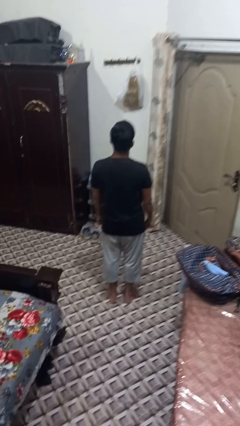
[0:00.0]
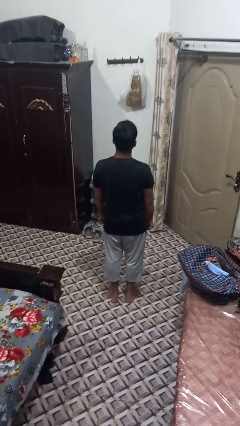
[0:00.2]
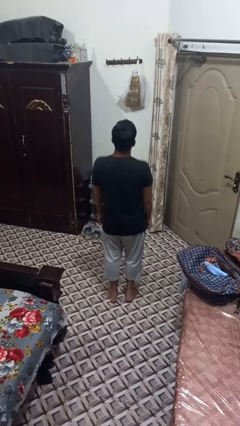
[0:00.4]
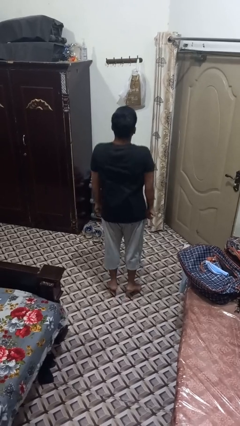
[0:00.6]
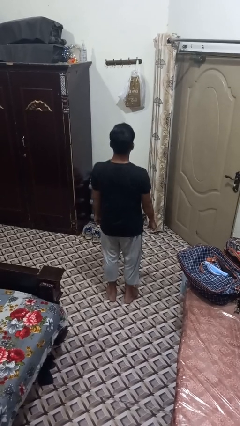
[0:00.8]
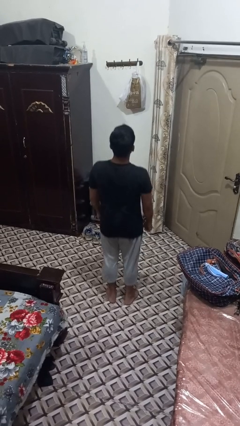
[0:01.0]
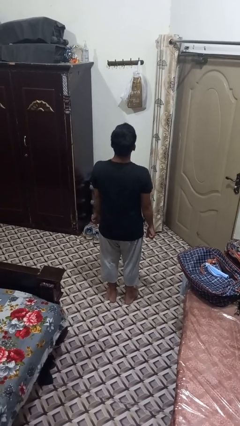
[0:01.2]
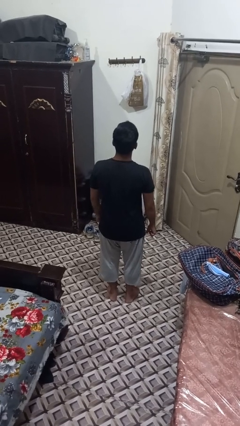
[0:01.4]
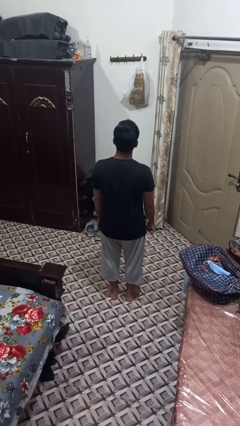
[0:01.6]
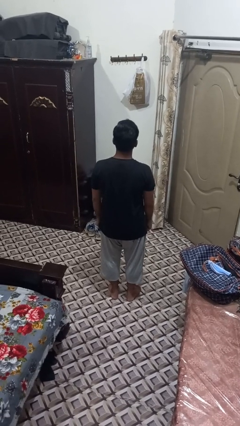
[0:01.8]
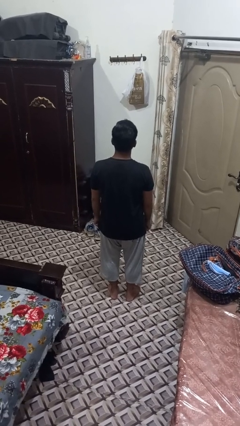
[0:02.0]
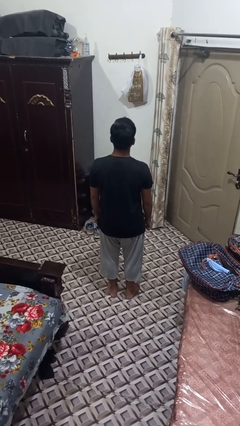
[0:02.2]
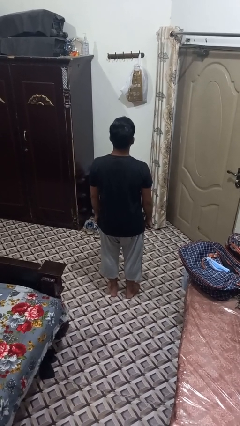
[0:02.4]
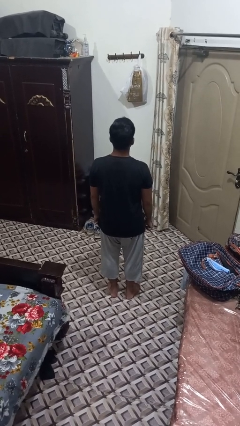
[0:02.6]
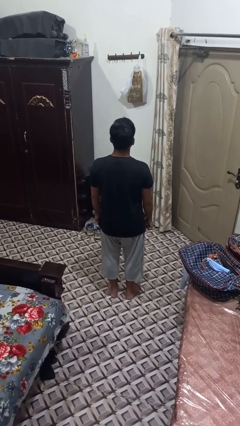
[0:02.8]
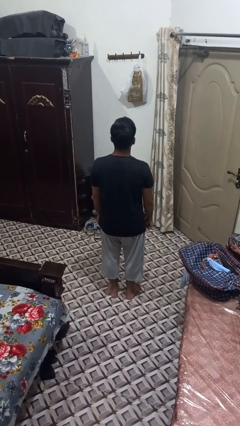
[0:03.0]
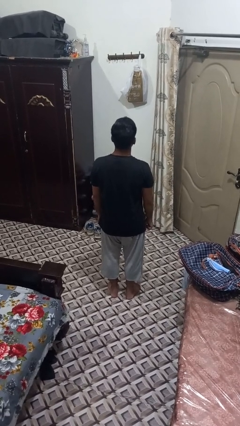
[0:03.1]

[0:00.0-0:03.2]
person jumps

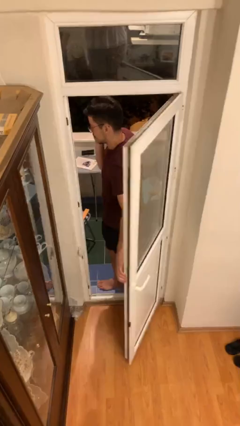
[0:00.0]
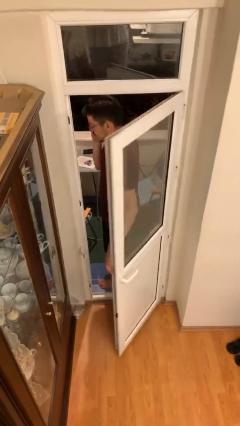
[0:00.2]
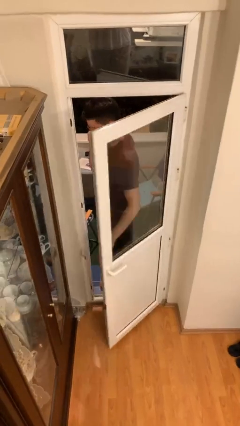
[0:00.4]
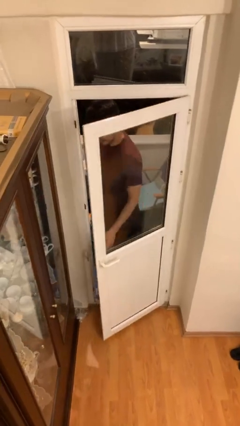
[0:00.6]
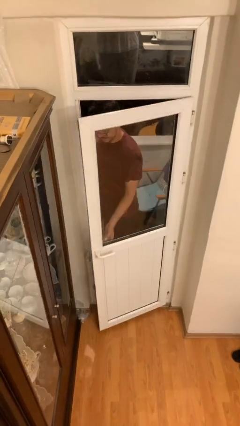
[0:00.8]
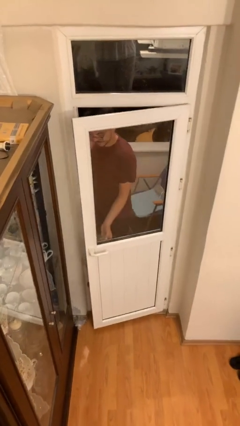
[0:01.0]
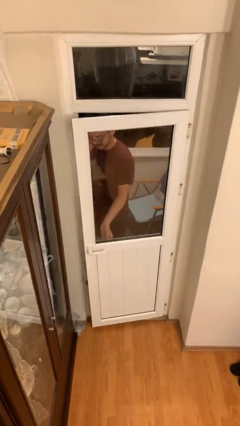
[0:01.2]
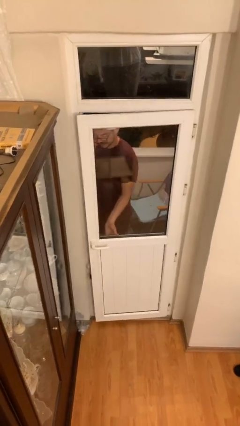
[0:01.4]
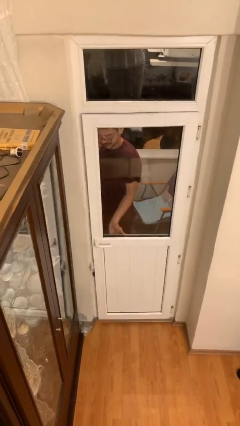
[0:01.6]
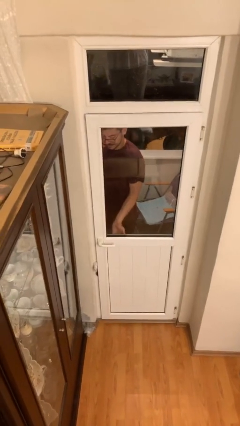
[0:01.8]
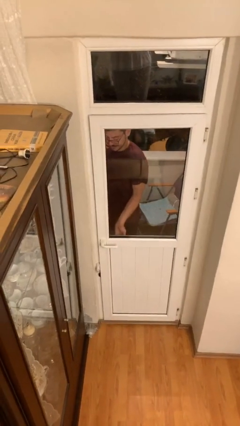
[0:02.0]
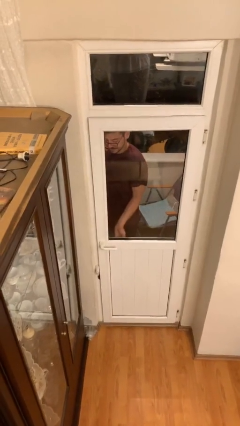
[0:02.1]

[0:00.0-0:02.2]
person closes facility door

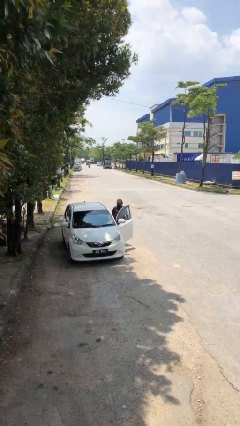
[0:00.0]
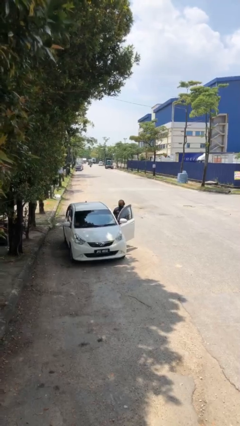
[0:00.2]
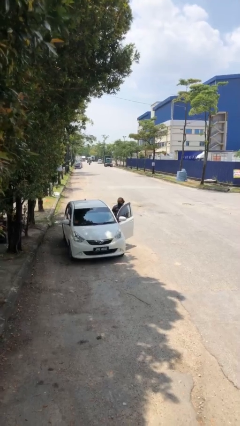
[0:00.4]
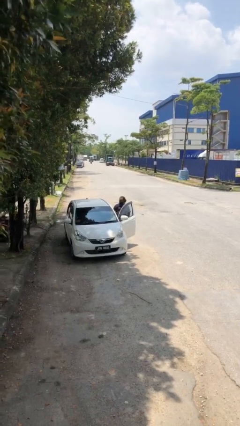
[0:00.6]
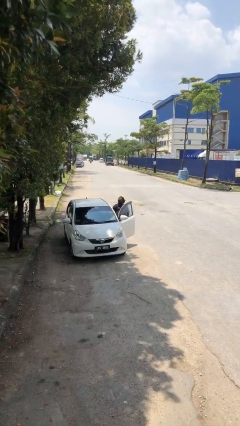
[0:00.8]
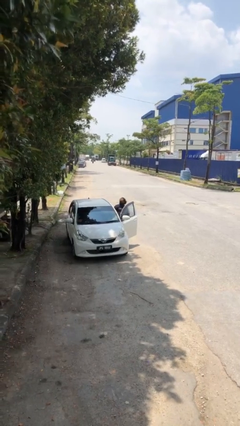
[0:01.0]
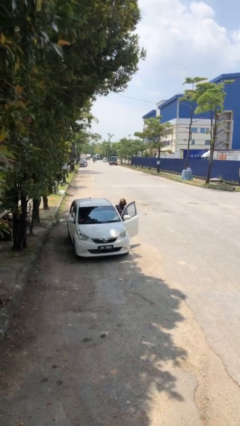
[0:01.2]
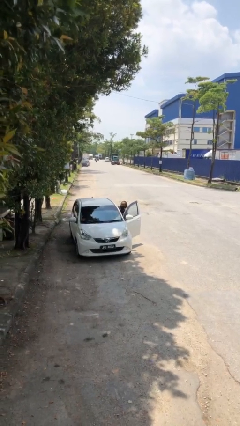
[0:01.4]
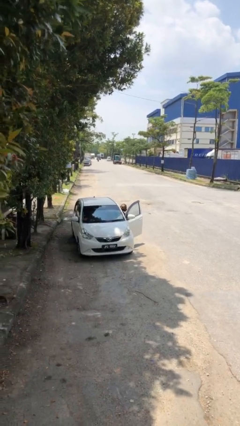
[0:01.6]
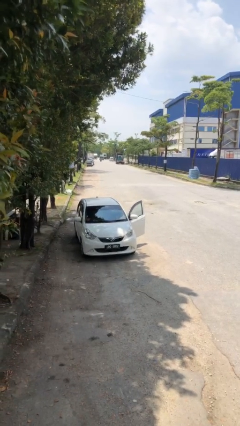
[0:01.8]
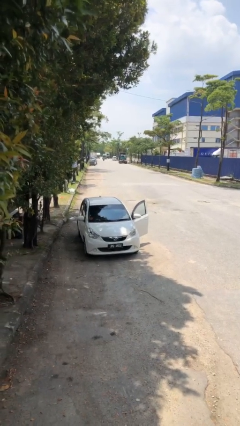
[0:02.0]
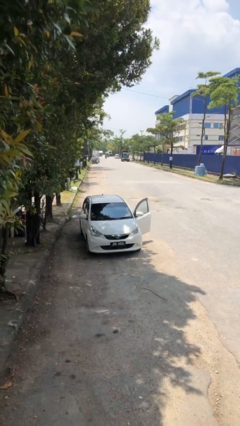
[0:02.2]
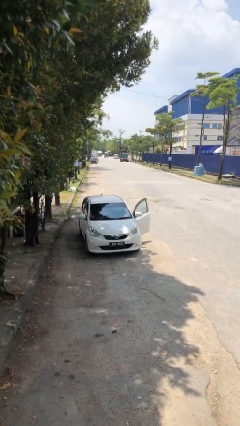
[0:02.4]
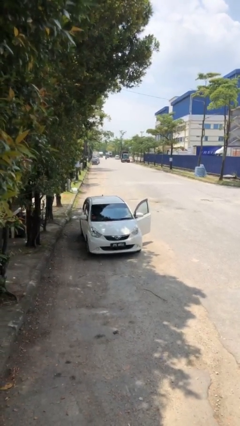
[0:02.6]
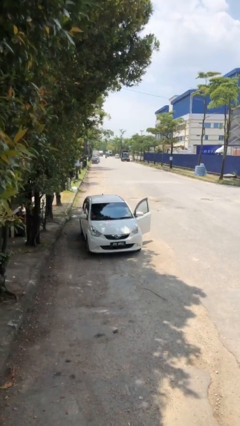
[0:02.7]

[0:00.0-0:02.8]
person enters car

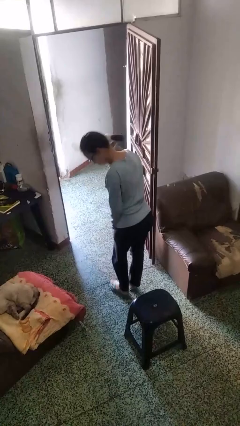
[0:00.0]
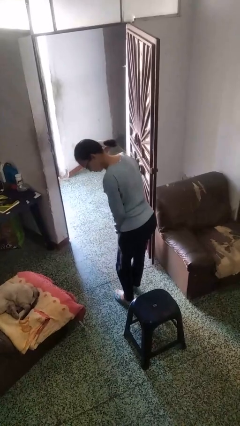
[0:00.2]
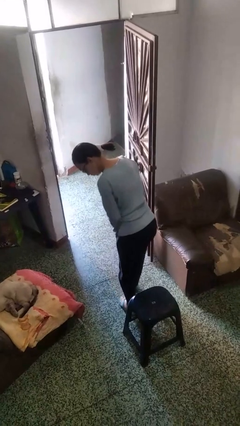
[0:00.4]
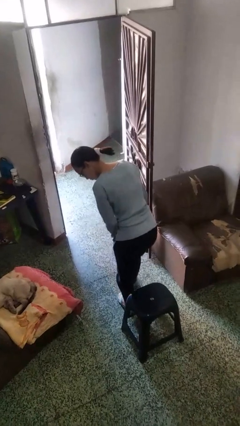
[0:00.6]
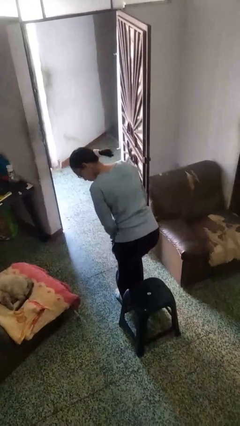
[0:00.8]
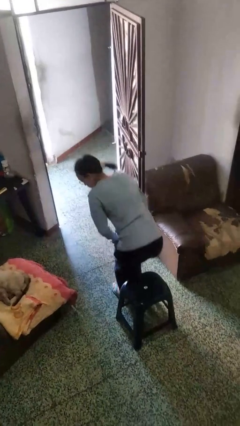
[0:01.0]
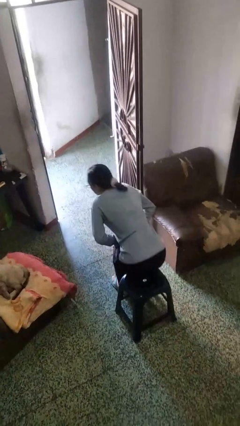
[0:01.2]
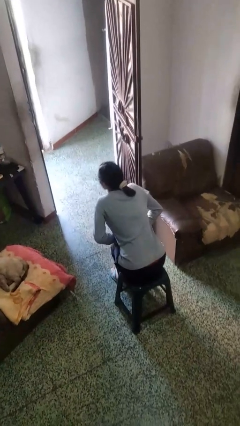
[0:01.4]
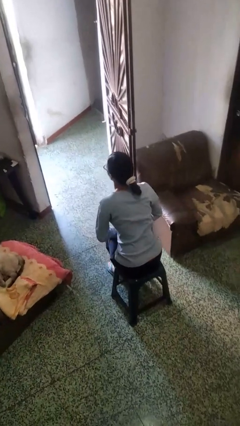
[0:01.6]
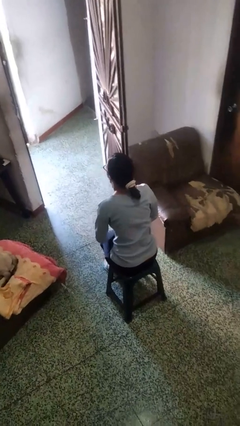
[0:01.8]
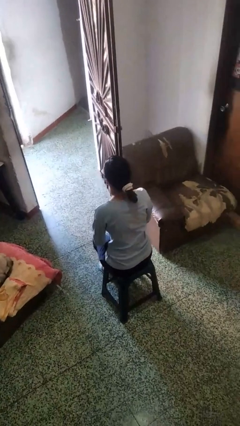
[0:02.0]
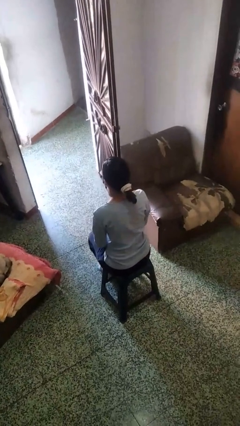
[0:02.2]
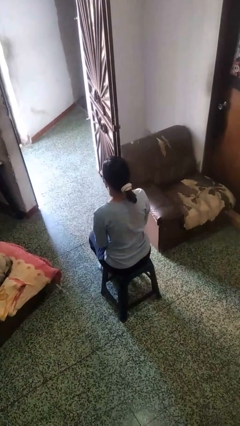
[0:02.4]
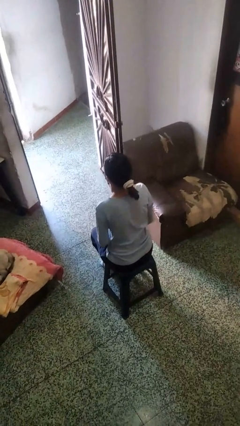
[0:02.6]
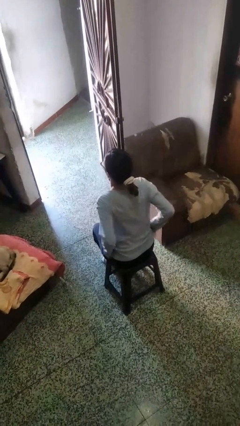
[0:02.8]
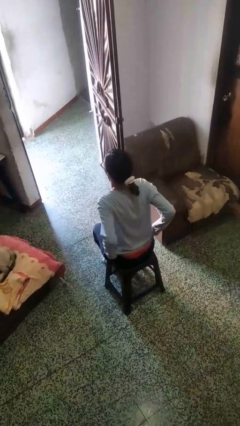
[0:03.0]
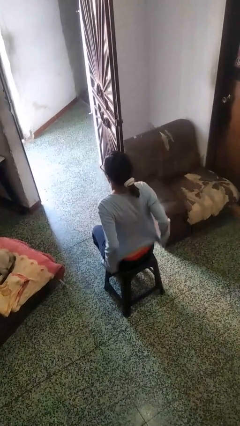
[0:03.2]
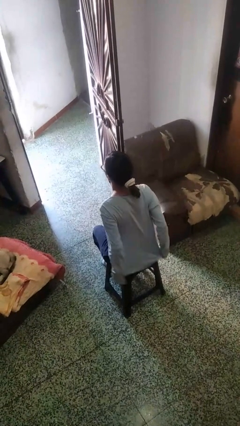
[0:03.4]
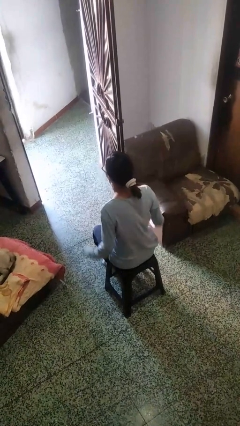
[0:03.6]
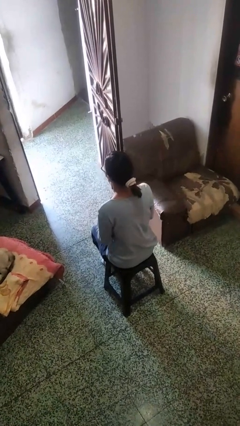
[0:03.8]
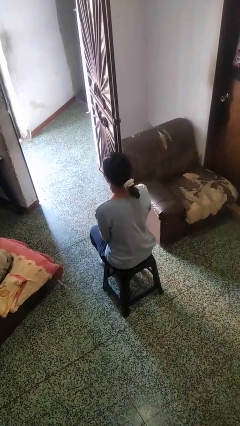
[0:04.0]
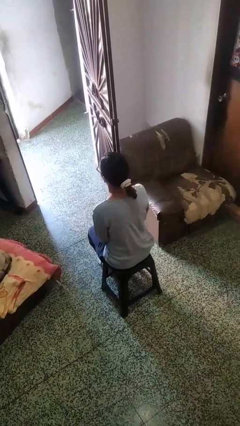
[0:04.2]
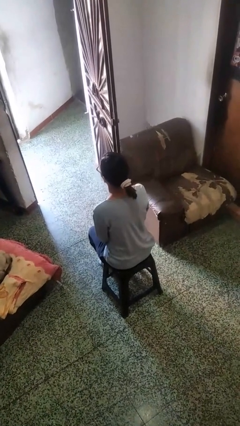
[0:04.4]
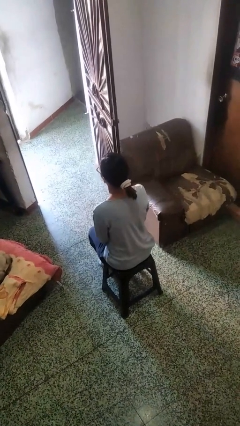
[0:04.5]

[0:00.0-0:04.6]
person sits down

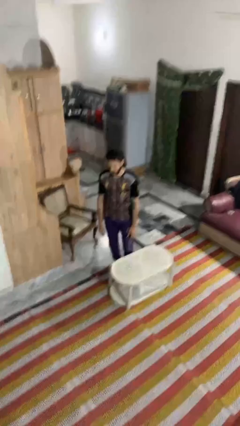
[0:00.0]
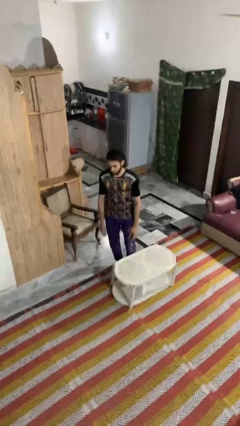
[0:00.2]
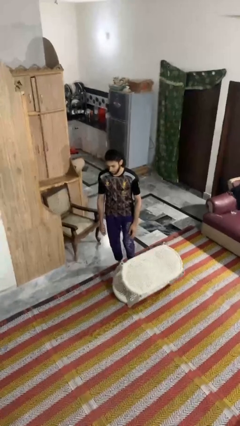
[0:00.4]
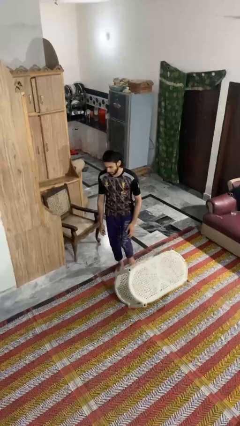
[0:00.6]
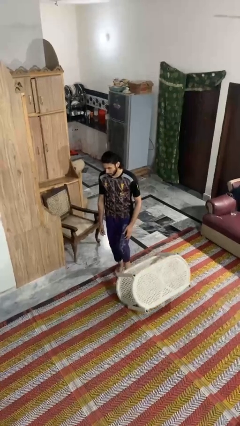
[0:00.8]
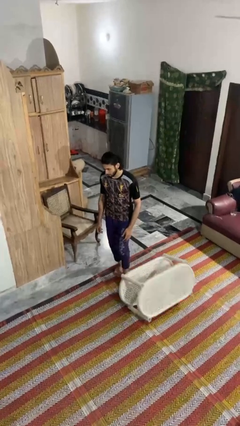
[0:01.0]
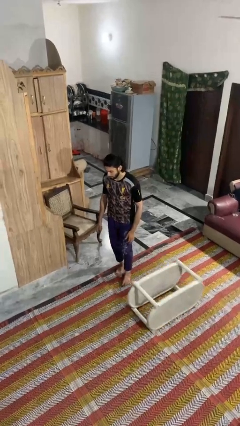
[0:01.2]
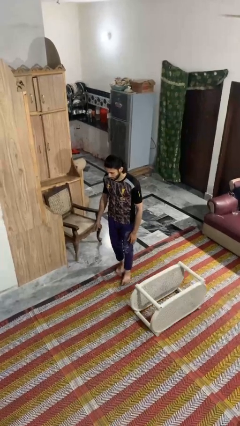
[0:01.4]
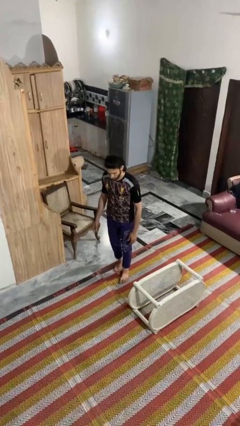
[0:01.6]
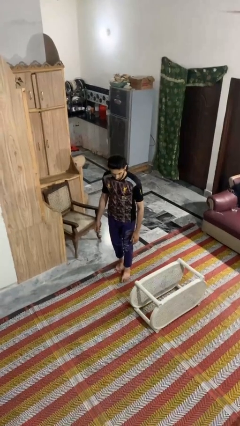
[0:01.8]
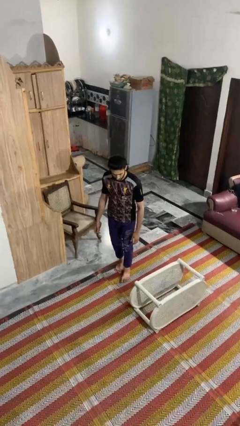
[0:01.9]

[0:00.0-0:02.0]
person knocks over furniture

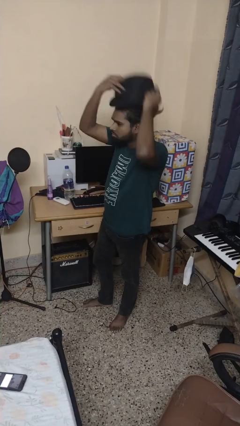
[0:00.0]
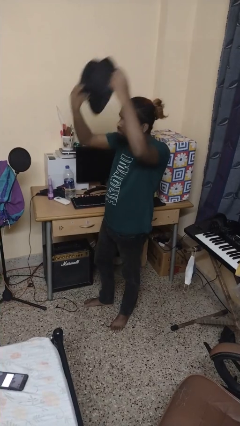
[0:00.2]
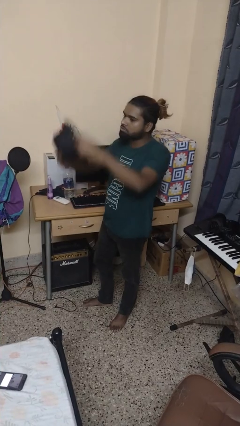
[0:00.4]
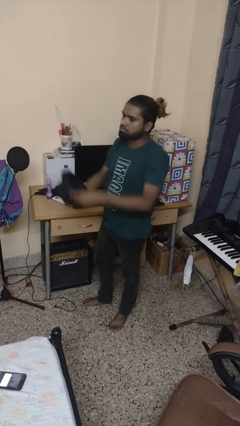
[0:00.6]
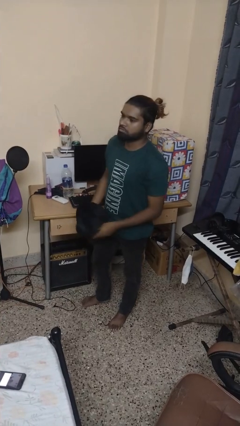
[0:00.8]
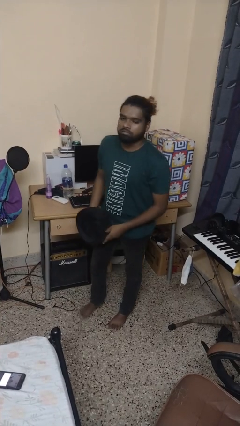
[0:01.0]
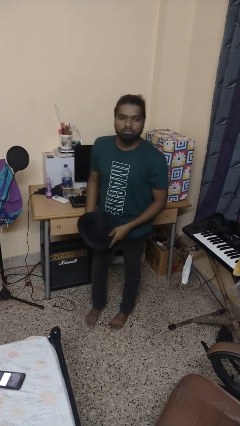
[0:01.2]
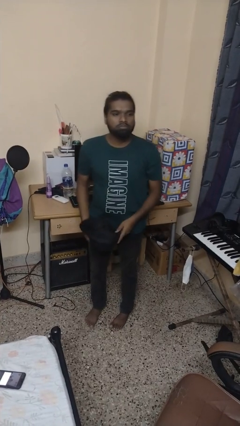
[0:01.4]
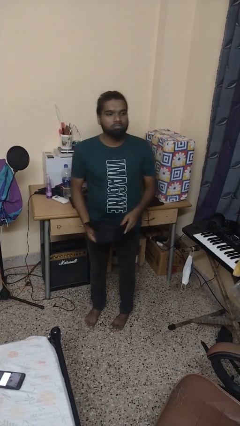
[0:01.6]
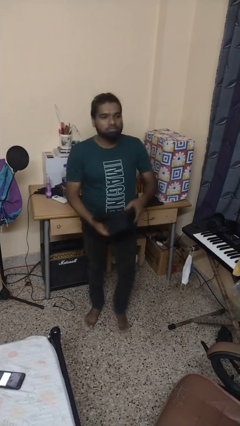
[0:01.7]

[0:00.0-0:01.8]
person takes off hat

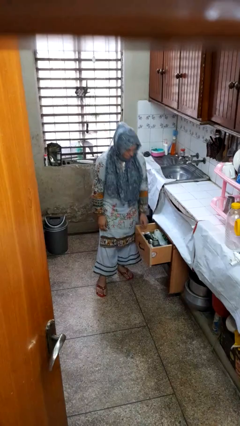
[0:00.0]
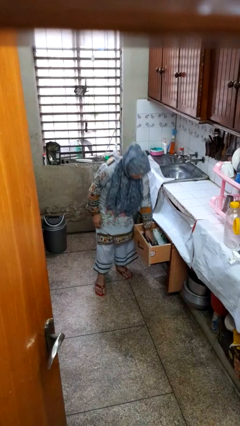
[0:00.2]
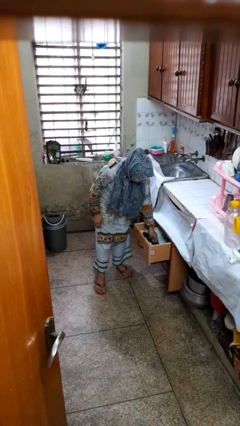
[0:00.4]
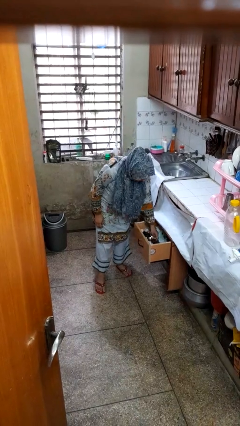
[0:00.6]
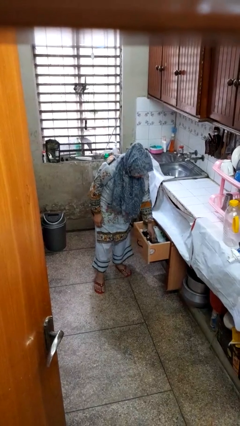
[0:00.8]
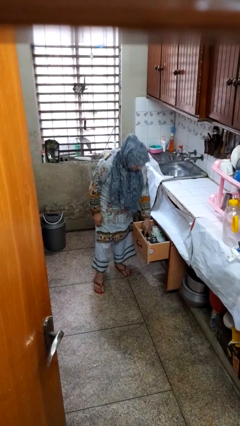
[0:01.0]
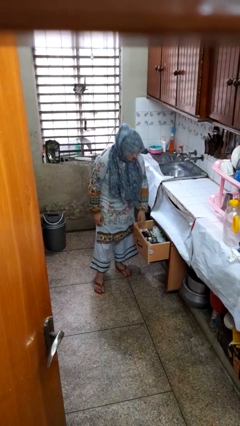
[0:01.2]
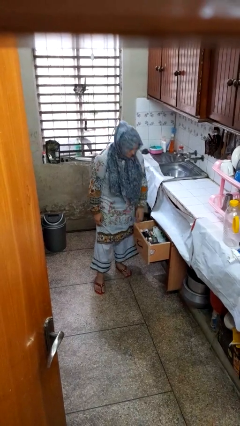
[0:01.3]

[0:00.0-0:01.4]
person searches in kitchen drawer
